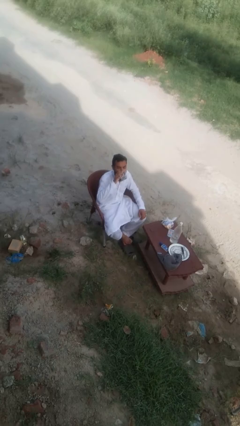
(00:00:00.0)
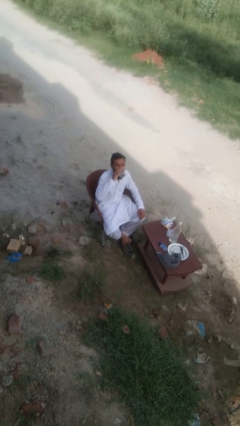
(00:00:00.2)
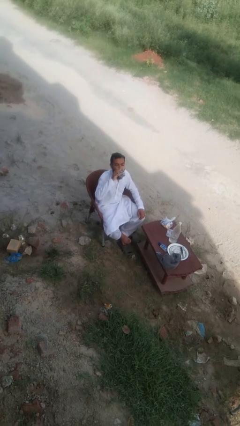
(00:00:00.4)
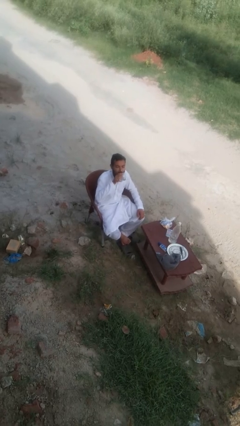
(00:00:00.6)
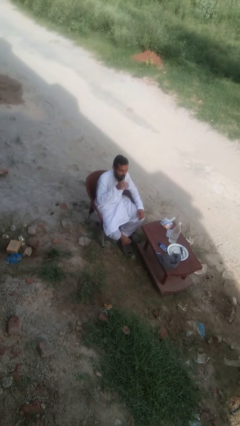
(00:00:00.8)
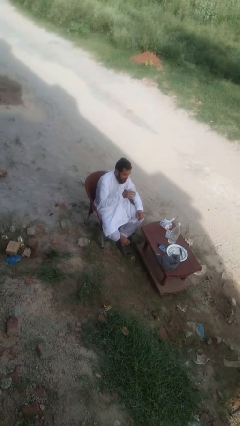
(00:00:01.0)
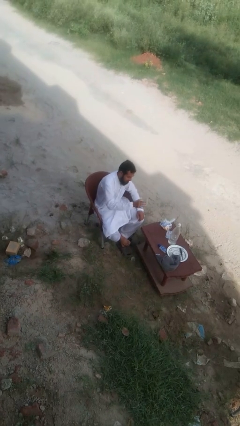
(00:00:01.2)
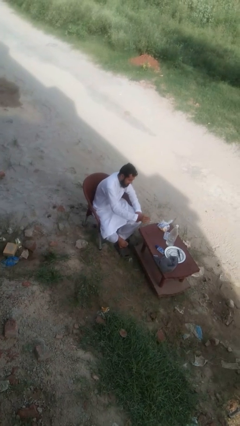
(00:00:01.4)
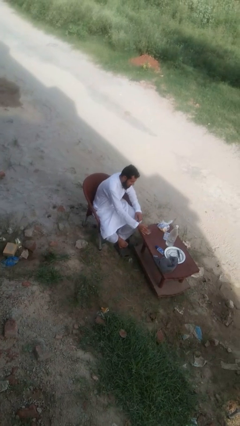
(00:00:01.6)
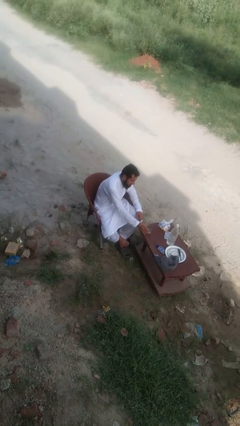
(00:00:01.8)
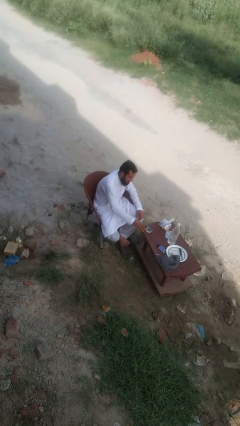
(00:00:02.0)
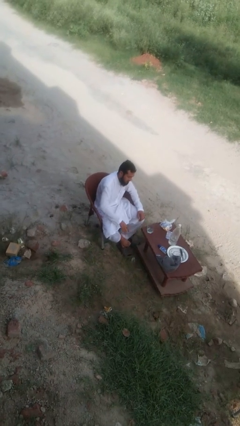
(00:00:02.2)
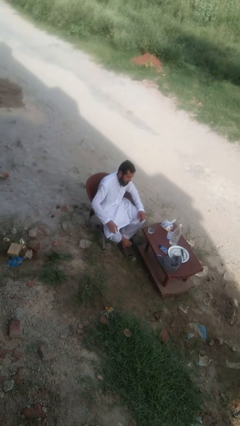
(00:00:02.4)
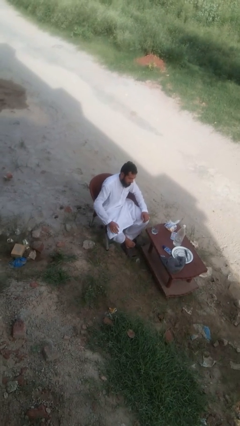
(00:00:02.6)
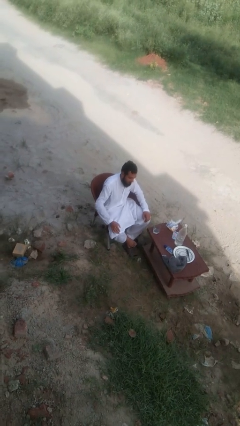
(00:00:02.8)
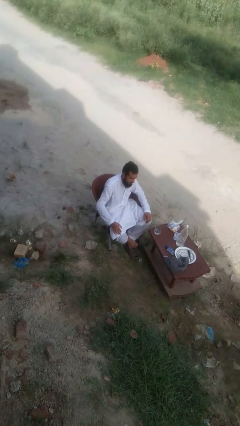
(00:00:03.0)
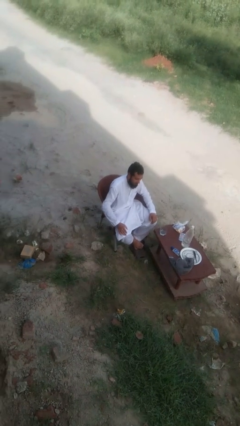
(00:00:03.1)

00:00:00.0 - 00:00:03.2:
person puts down object on table

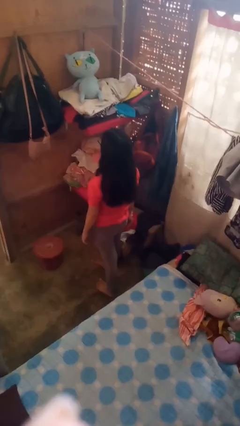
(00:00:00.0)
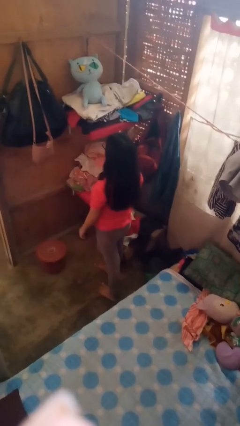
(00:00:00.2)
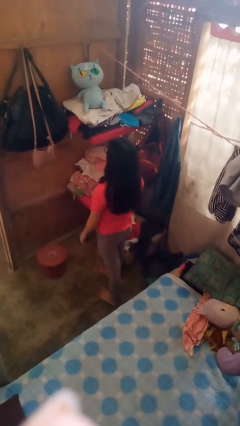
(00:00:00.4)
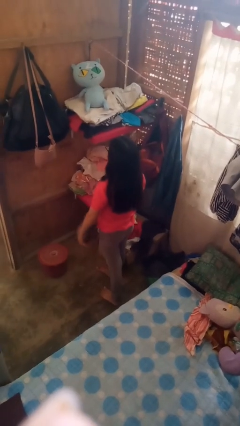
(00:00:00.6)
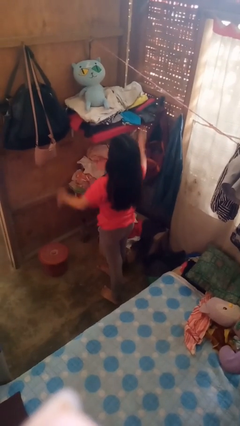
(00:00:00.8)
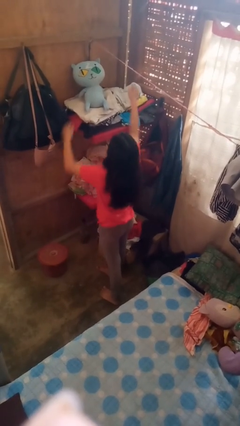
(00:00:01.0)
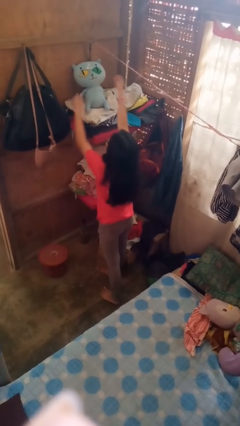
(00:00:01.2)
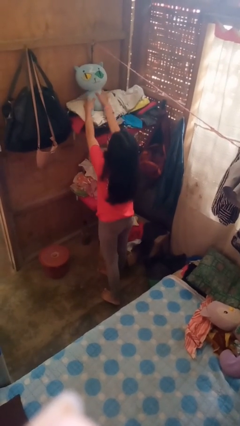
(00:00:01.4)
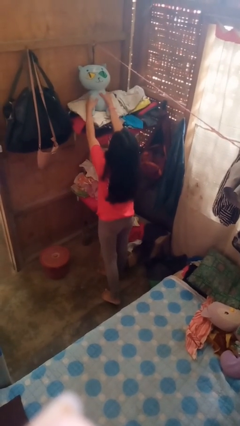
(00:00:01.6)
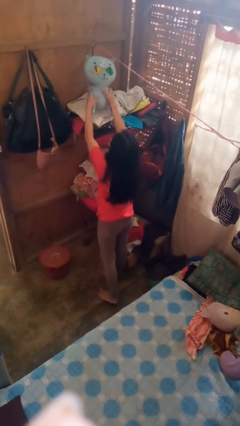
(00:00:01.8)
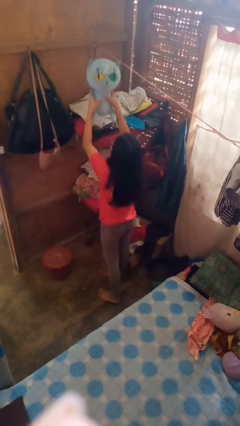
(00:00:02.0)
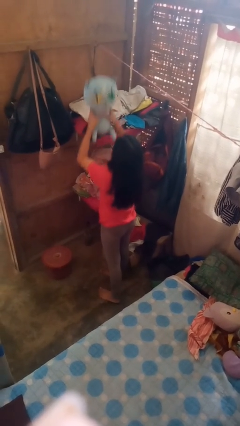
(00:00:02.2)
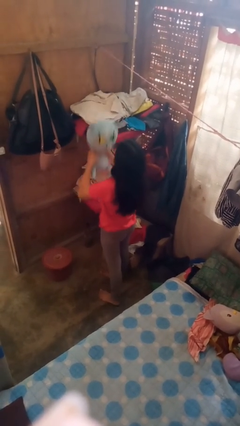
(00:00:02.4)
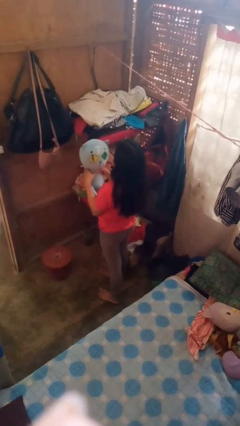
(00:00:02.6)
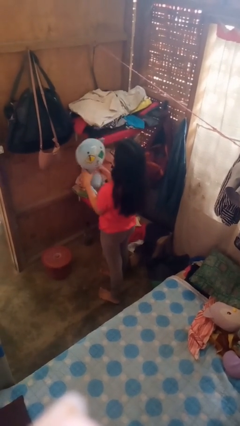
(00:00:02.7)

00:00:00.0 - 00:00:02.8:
person picks up object from shelf

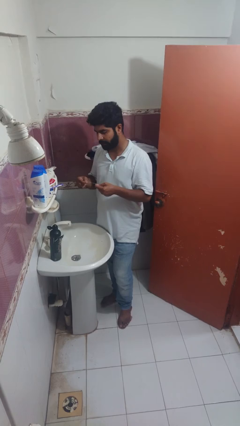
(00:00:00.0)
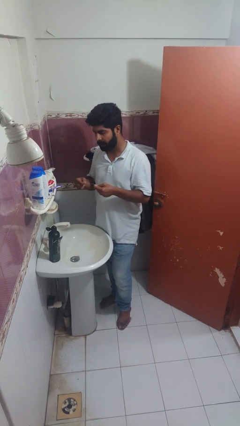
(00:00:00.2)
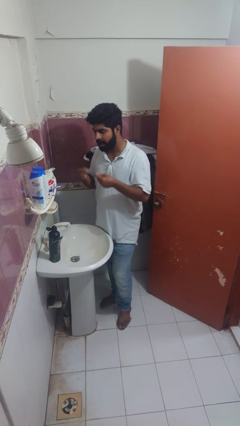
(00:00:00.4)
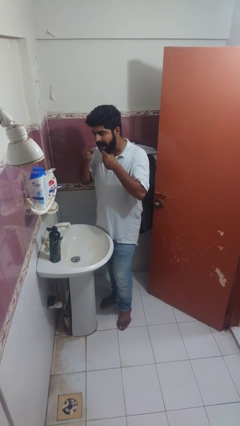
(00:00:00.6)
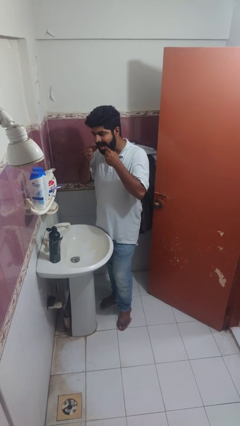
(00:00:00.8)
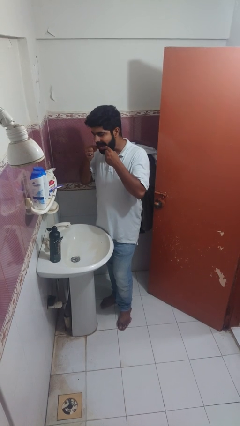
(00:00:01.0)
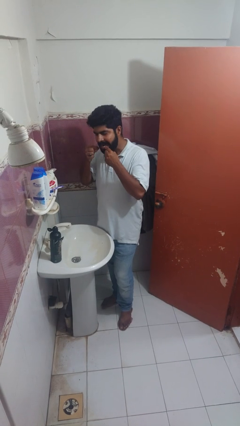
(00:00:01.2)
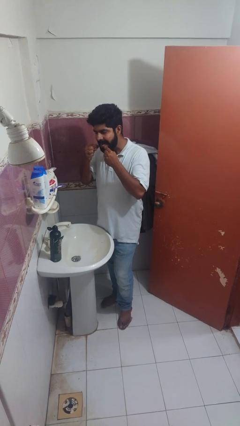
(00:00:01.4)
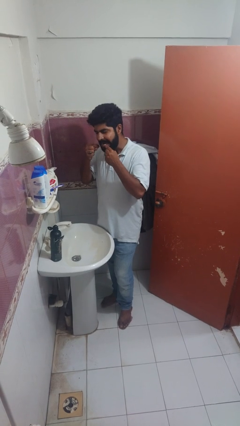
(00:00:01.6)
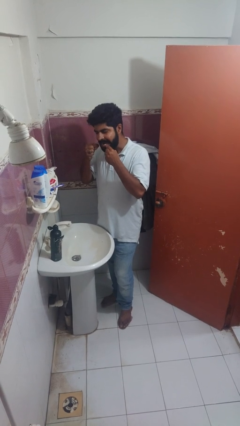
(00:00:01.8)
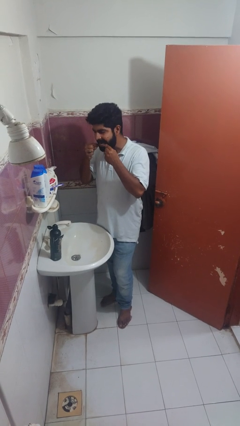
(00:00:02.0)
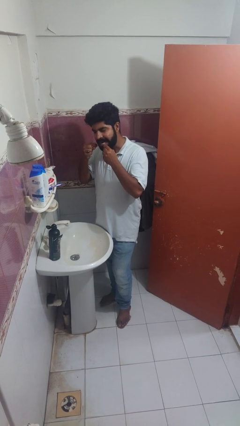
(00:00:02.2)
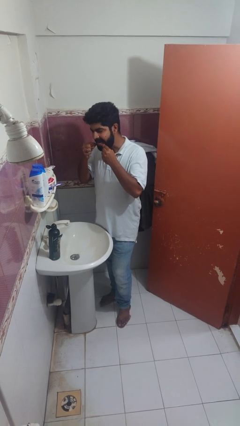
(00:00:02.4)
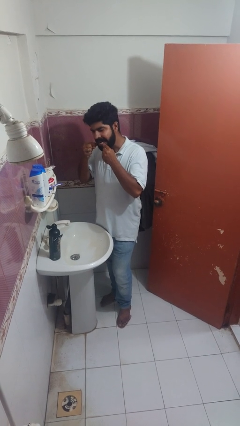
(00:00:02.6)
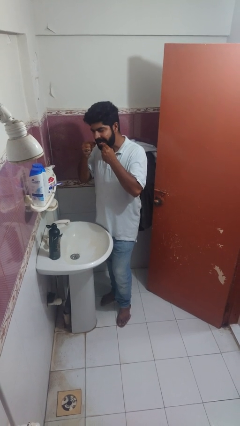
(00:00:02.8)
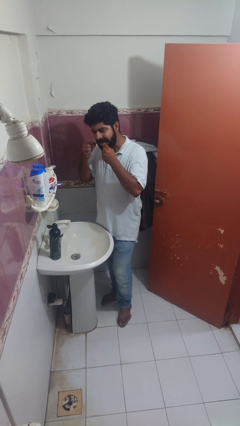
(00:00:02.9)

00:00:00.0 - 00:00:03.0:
person flosses

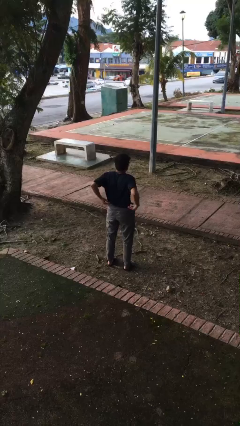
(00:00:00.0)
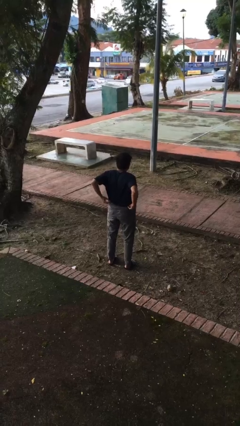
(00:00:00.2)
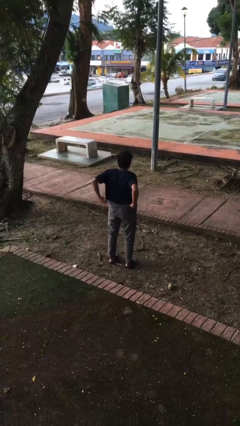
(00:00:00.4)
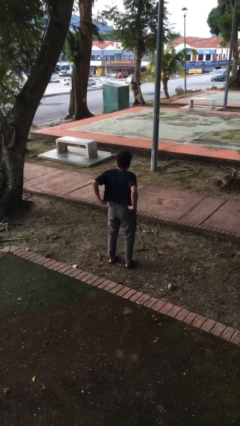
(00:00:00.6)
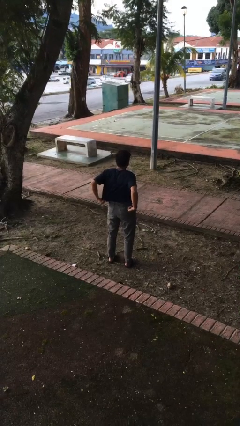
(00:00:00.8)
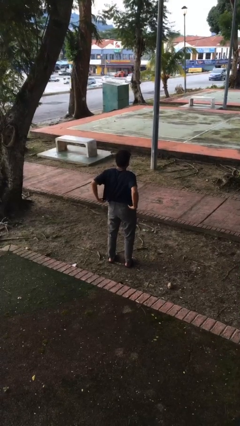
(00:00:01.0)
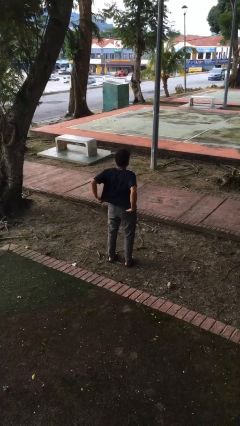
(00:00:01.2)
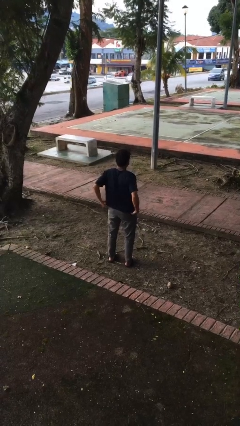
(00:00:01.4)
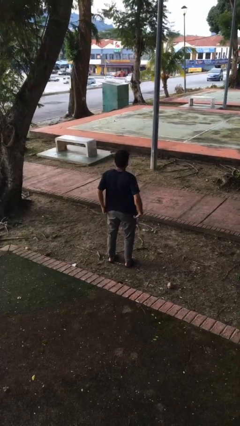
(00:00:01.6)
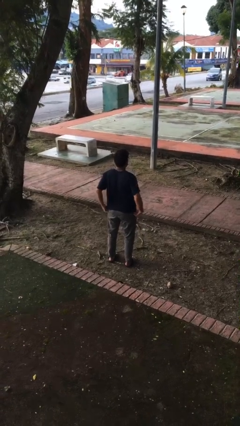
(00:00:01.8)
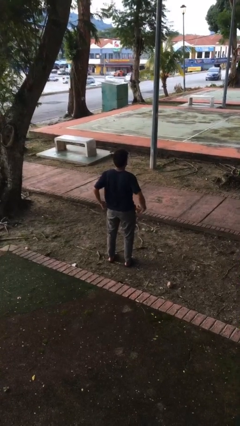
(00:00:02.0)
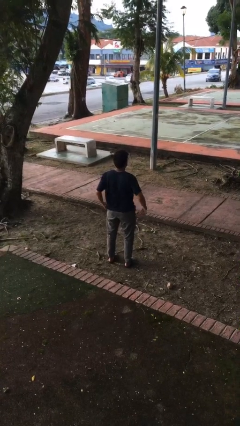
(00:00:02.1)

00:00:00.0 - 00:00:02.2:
person untucks shirt

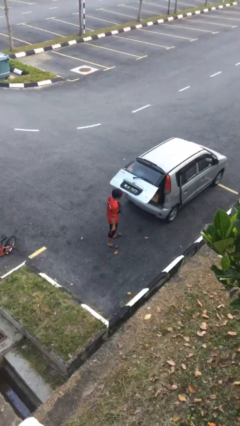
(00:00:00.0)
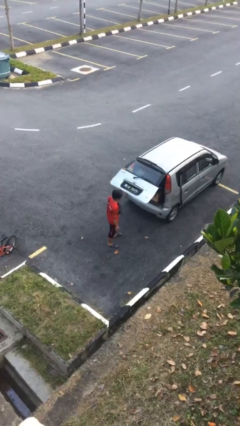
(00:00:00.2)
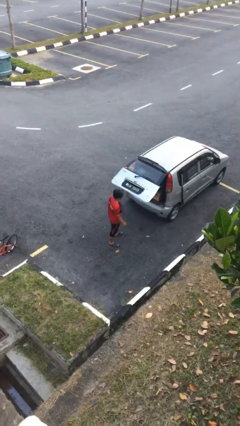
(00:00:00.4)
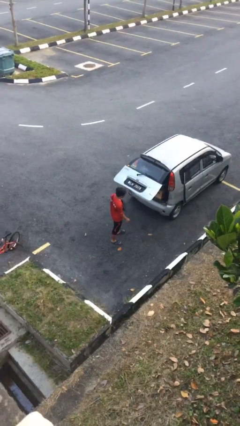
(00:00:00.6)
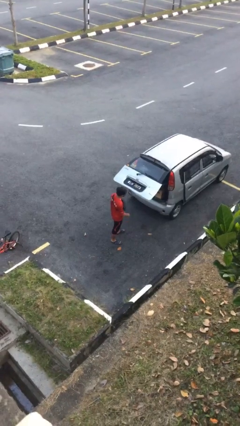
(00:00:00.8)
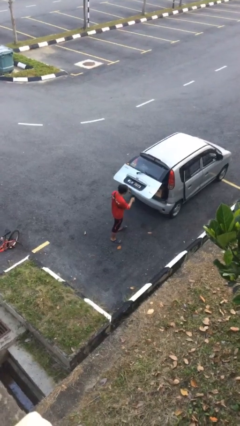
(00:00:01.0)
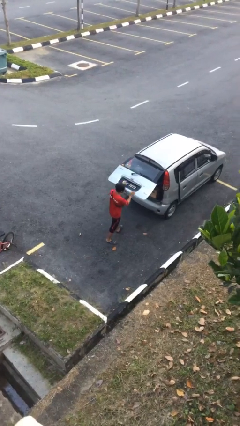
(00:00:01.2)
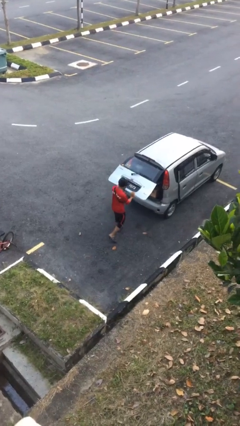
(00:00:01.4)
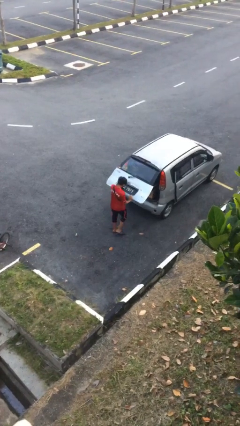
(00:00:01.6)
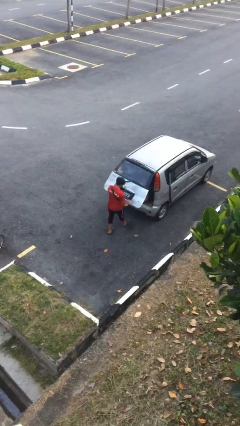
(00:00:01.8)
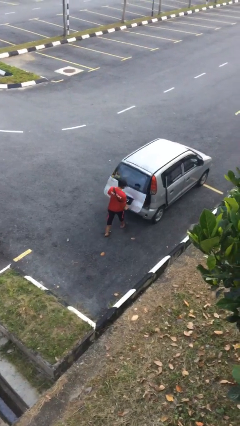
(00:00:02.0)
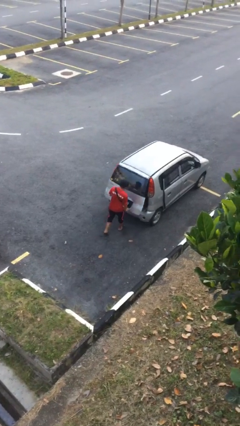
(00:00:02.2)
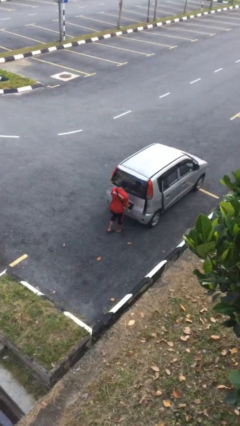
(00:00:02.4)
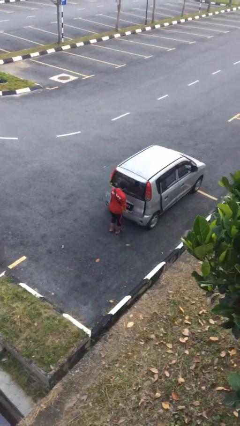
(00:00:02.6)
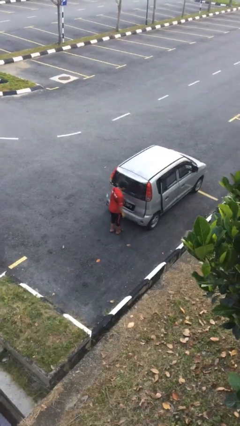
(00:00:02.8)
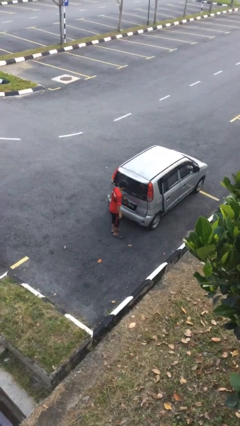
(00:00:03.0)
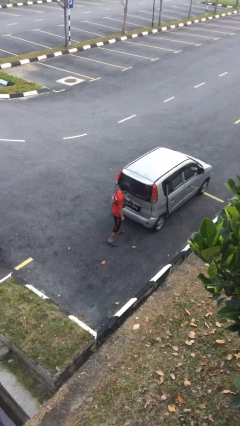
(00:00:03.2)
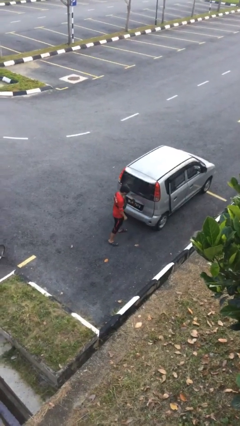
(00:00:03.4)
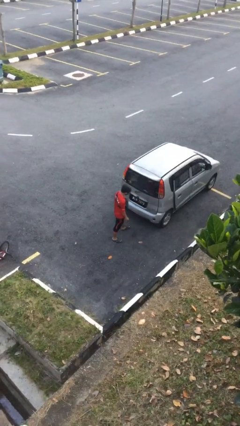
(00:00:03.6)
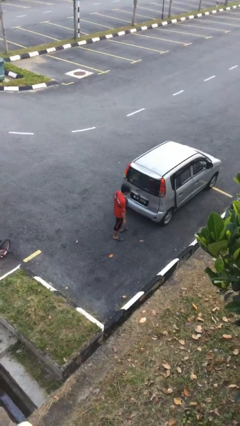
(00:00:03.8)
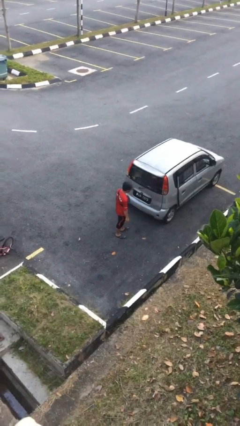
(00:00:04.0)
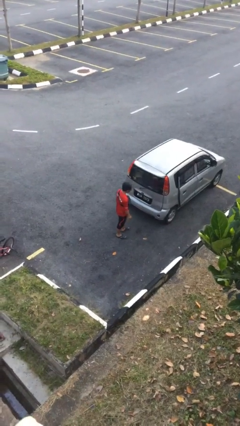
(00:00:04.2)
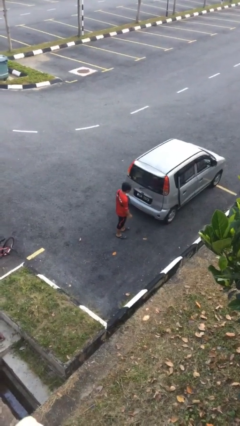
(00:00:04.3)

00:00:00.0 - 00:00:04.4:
person closes car trunk

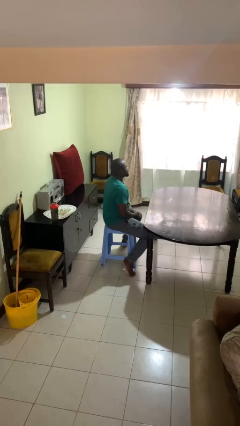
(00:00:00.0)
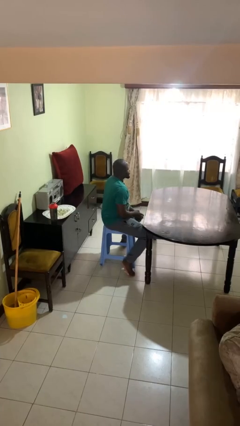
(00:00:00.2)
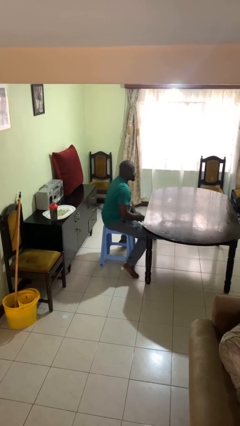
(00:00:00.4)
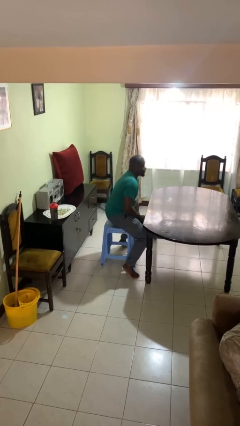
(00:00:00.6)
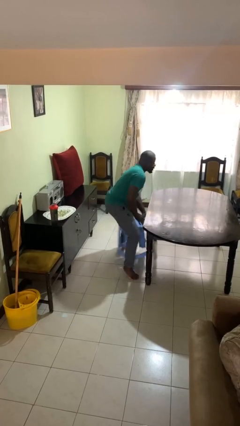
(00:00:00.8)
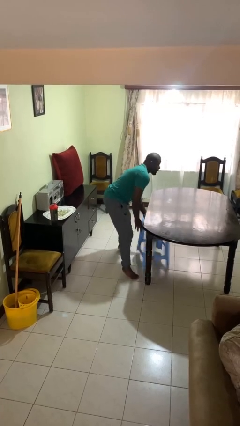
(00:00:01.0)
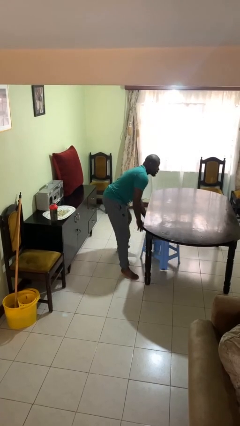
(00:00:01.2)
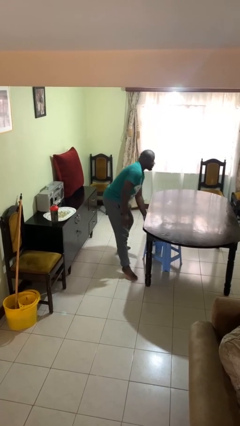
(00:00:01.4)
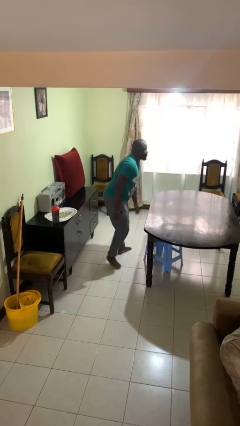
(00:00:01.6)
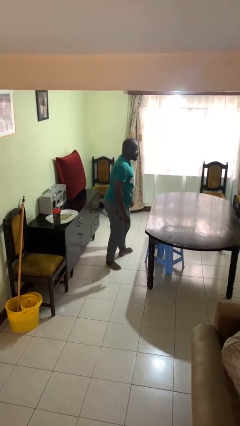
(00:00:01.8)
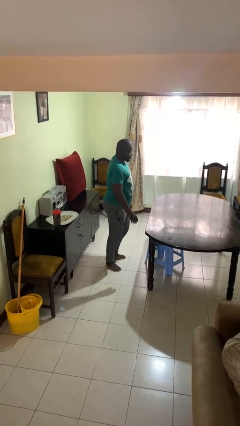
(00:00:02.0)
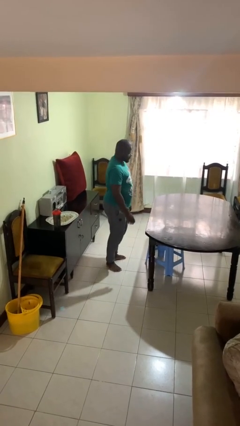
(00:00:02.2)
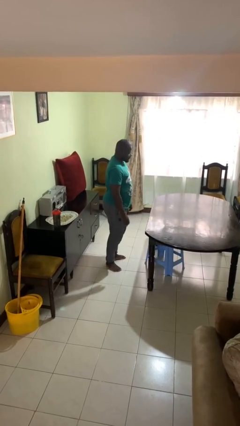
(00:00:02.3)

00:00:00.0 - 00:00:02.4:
person stands up
